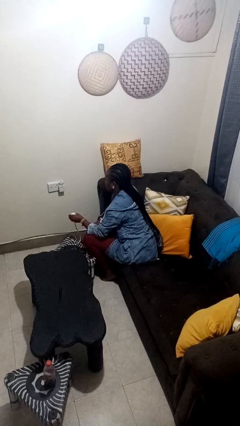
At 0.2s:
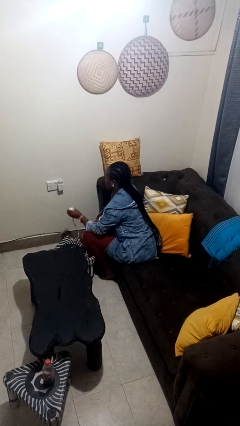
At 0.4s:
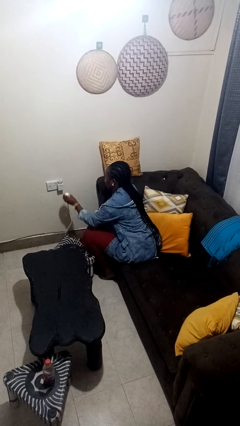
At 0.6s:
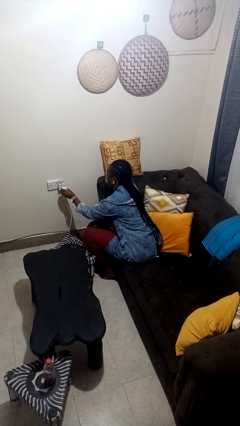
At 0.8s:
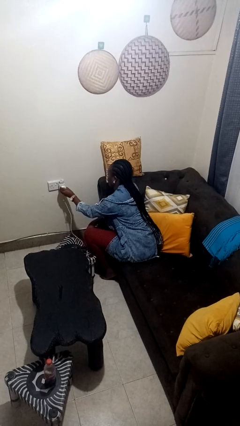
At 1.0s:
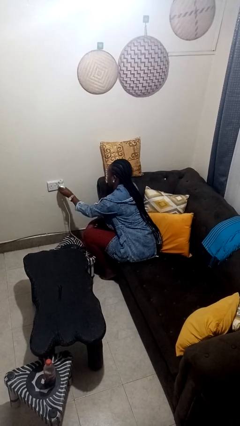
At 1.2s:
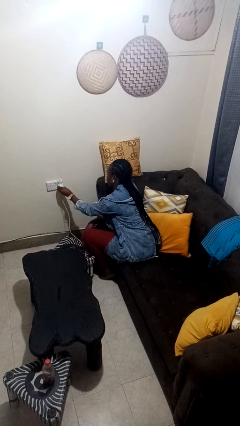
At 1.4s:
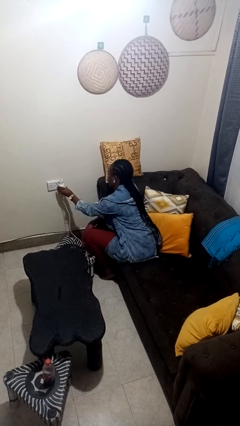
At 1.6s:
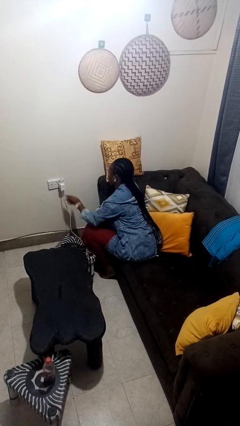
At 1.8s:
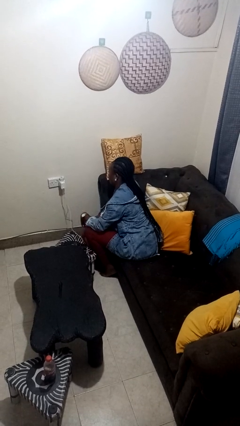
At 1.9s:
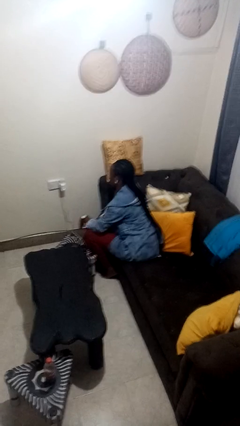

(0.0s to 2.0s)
person plugs into electrical socket

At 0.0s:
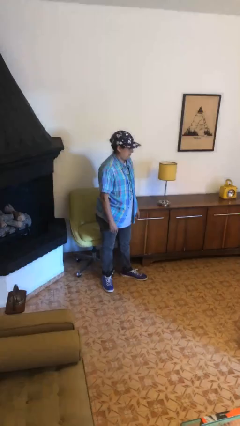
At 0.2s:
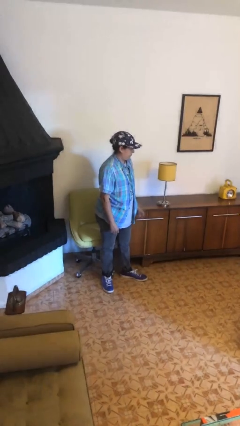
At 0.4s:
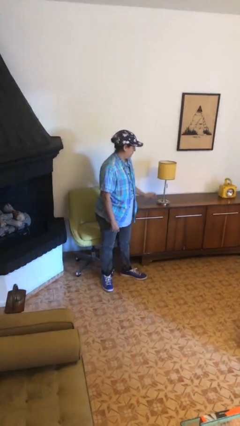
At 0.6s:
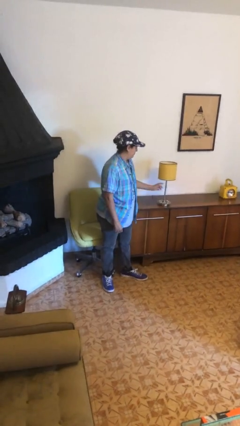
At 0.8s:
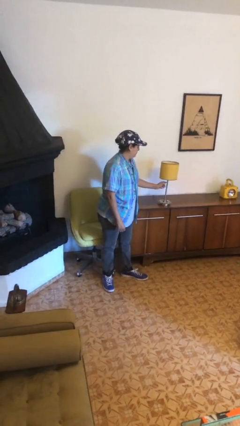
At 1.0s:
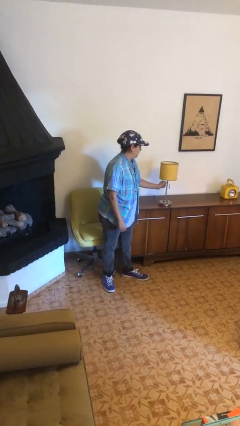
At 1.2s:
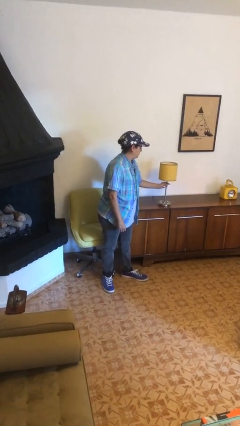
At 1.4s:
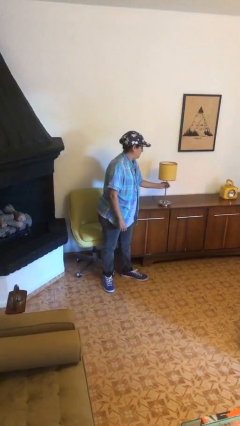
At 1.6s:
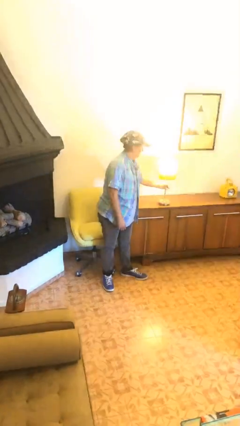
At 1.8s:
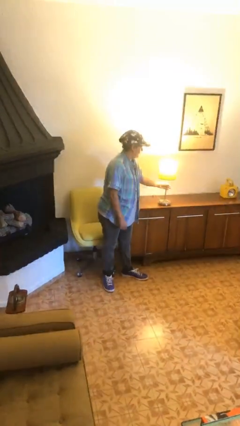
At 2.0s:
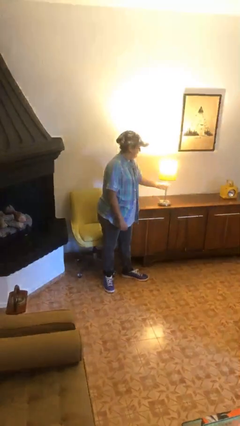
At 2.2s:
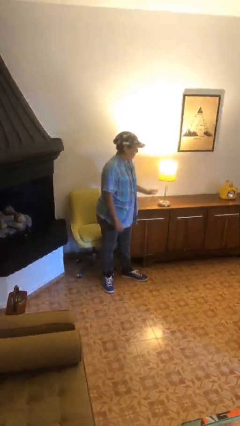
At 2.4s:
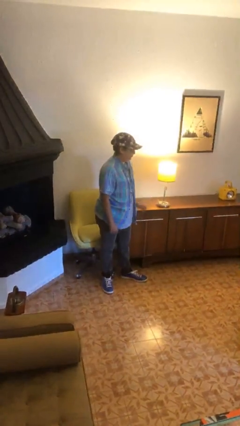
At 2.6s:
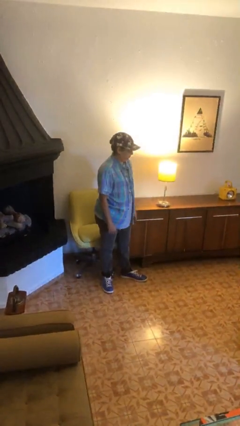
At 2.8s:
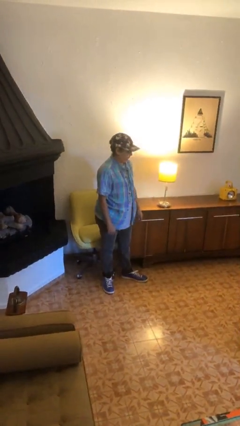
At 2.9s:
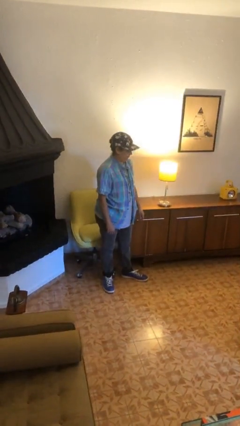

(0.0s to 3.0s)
person turns on lamp

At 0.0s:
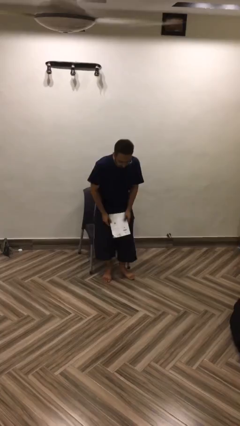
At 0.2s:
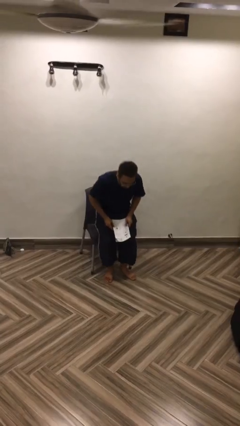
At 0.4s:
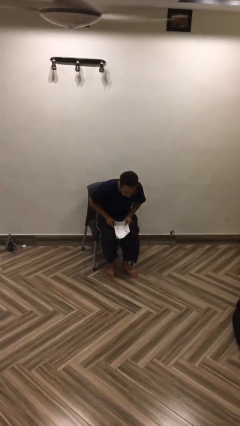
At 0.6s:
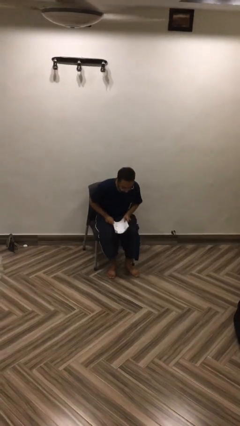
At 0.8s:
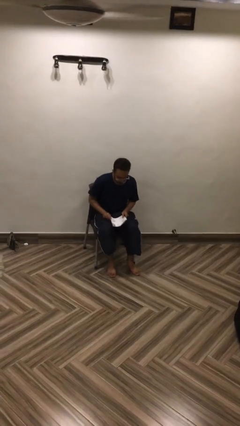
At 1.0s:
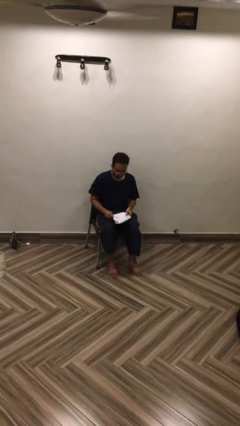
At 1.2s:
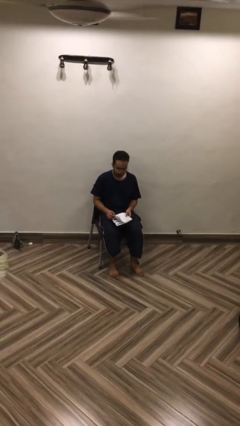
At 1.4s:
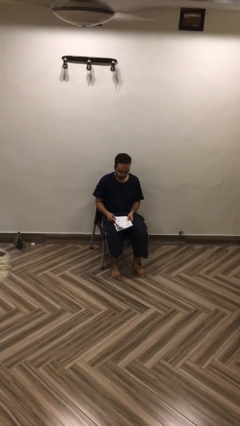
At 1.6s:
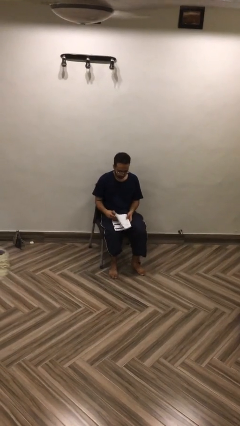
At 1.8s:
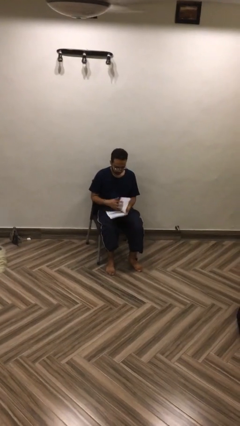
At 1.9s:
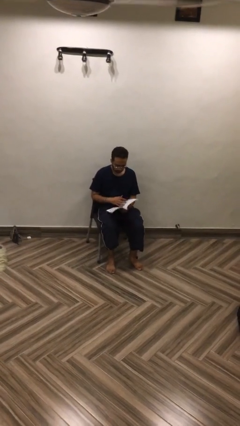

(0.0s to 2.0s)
person sits down

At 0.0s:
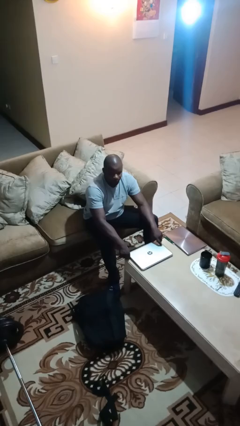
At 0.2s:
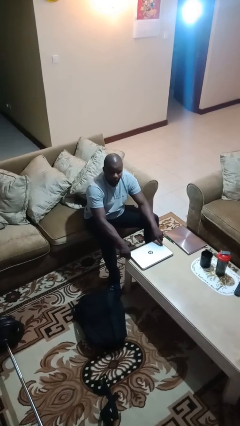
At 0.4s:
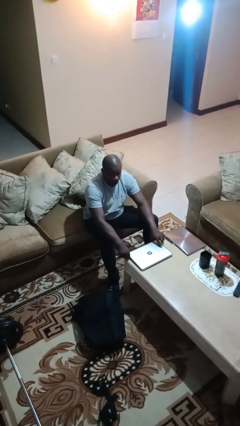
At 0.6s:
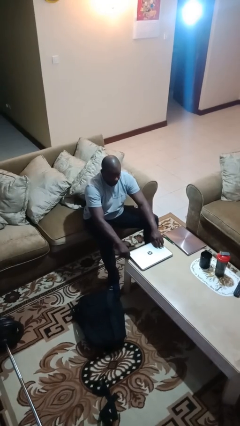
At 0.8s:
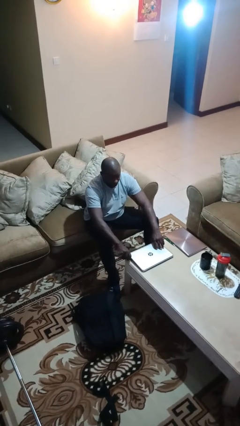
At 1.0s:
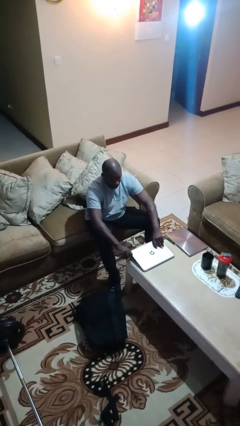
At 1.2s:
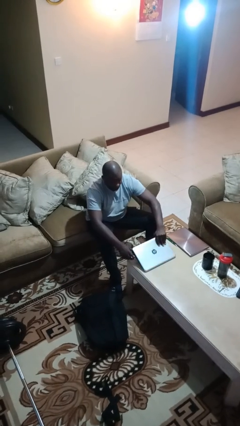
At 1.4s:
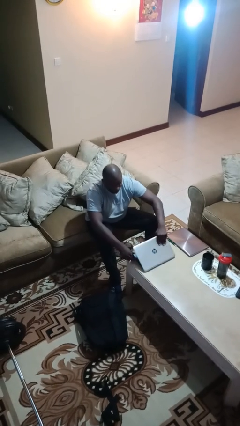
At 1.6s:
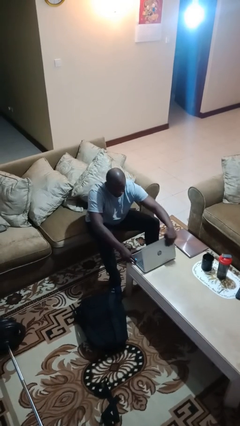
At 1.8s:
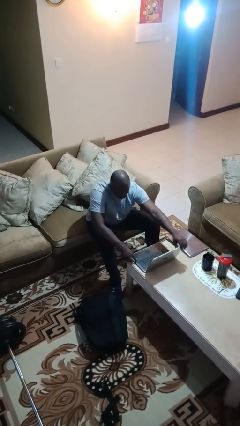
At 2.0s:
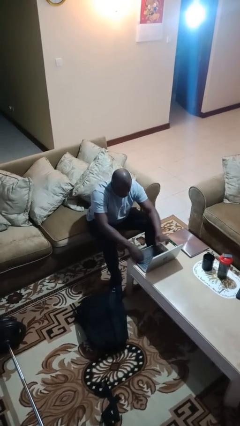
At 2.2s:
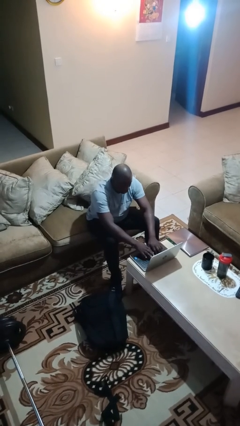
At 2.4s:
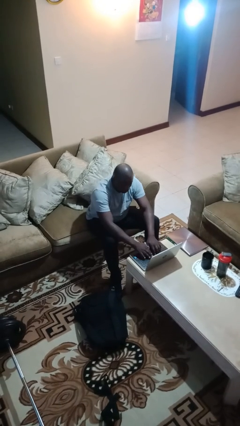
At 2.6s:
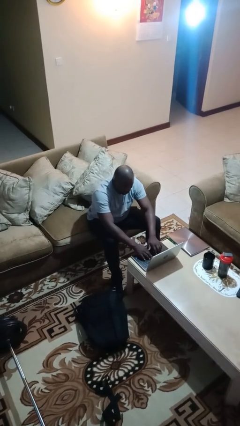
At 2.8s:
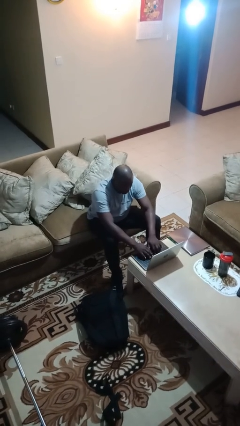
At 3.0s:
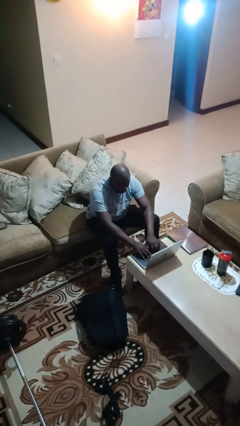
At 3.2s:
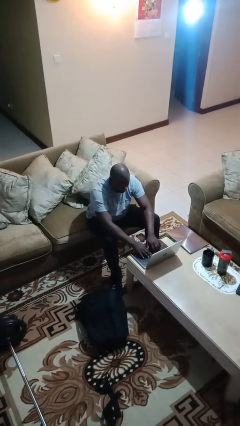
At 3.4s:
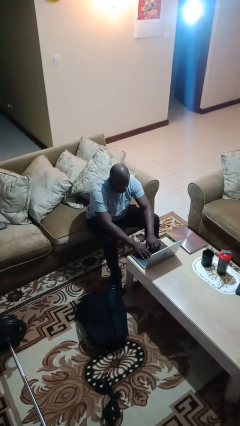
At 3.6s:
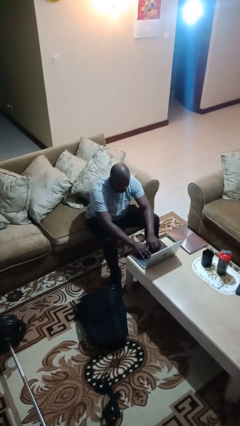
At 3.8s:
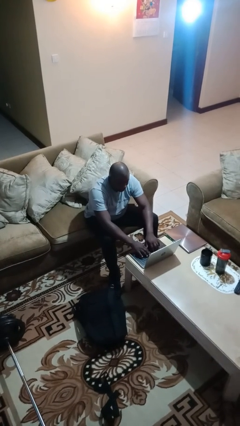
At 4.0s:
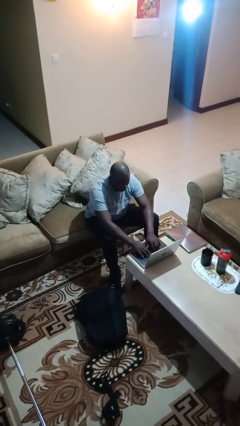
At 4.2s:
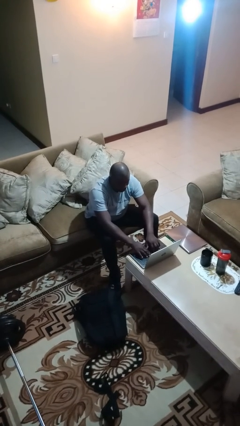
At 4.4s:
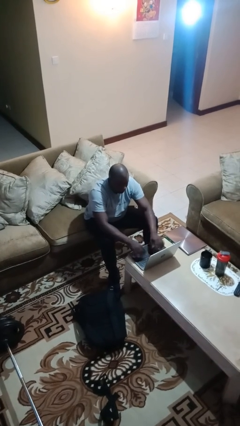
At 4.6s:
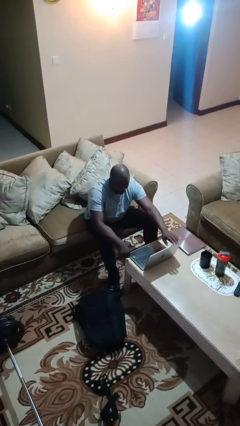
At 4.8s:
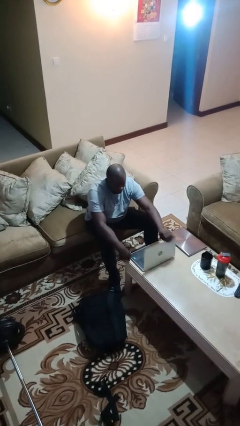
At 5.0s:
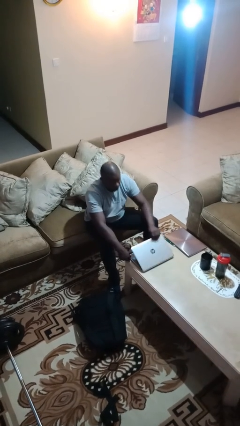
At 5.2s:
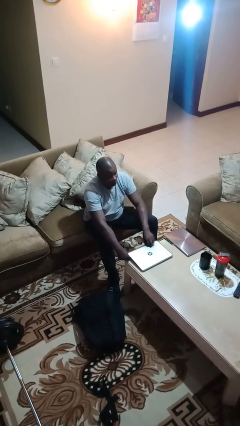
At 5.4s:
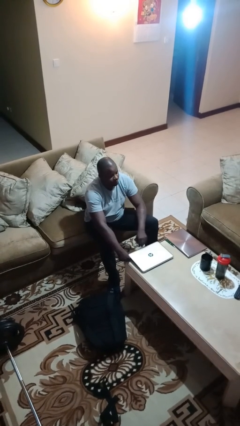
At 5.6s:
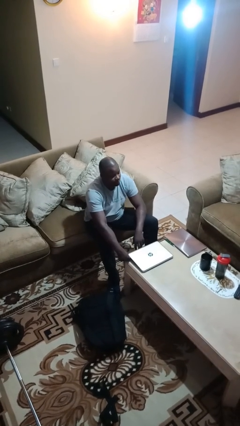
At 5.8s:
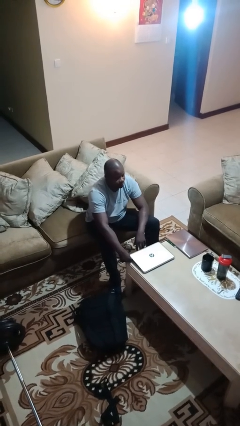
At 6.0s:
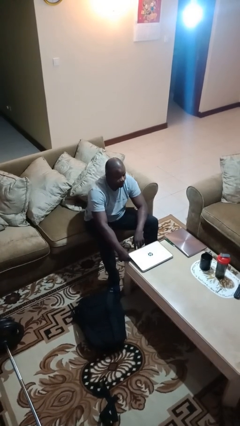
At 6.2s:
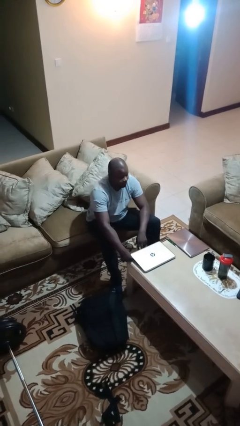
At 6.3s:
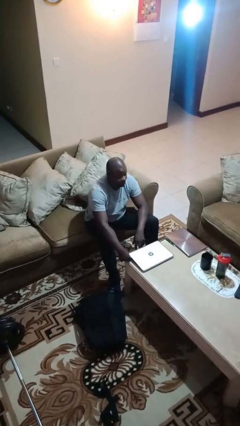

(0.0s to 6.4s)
person interacts with laptop

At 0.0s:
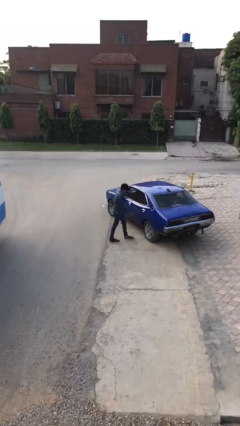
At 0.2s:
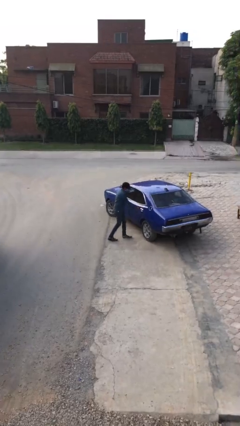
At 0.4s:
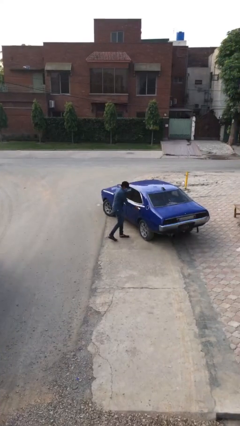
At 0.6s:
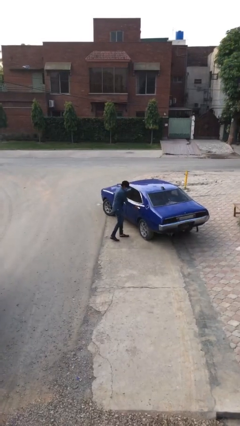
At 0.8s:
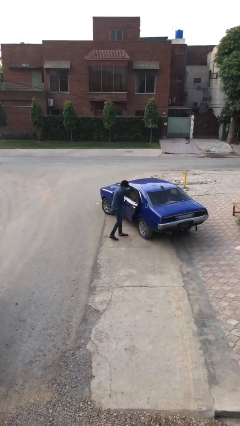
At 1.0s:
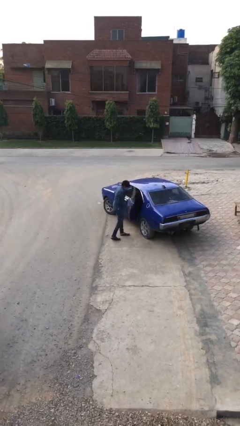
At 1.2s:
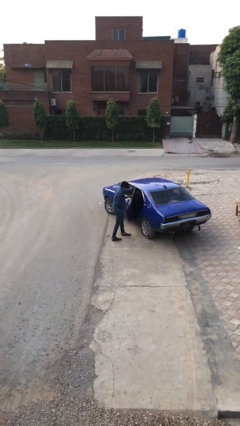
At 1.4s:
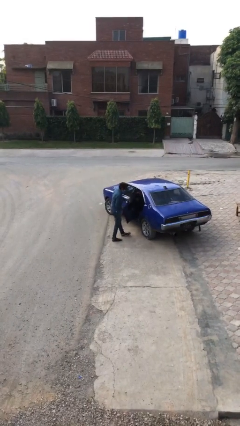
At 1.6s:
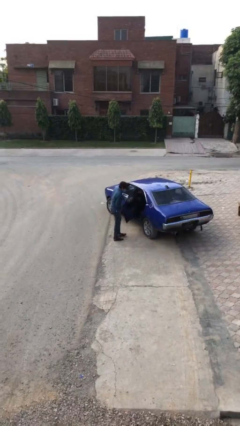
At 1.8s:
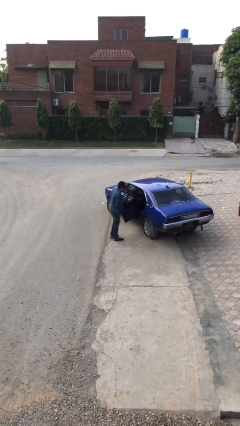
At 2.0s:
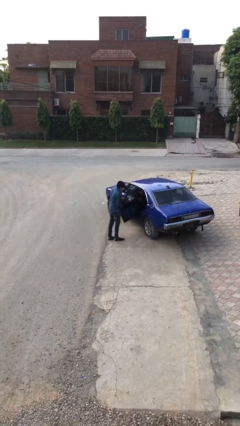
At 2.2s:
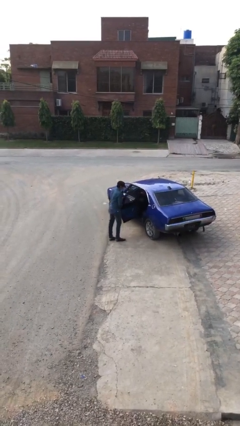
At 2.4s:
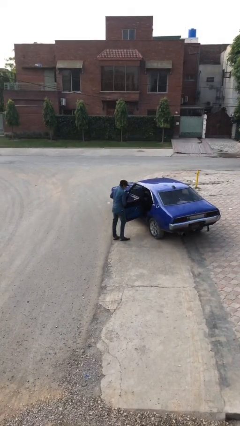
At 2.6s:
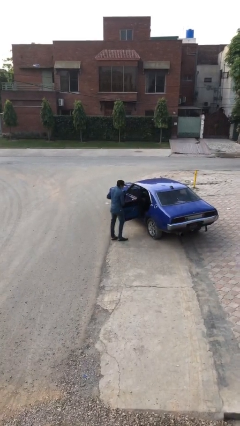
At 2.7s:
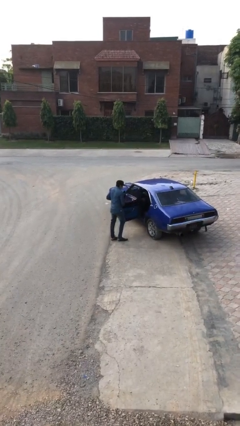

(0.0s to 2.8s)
person opens car door

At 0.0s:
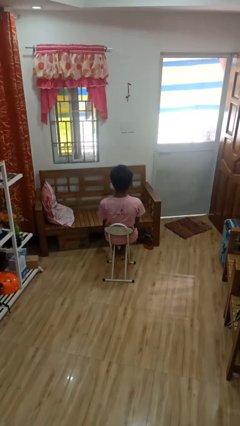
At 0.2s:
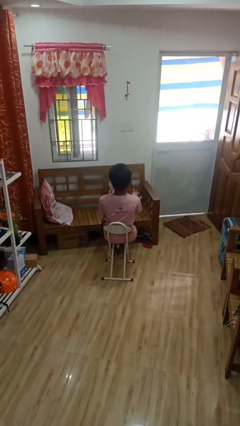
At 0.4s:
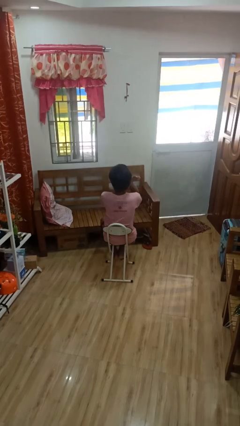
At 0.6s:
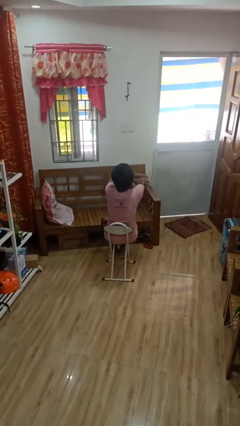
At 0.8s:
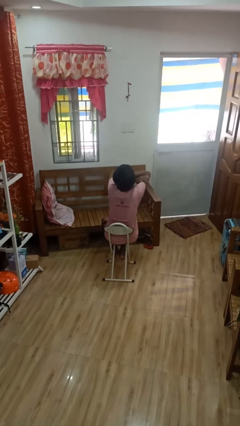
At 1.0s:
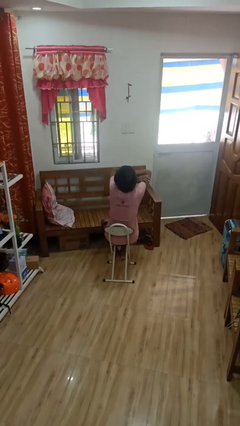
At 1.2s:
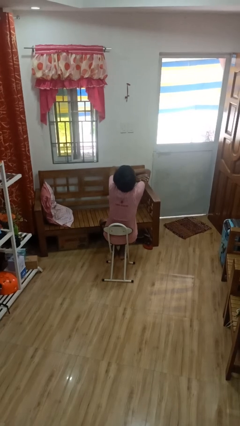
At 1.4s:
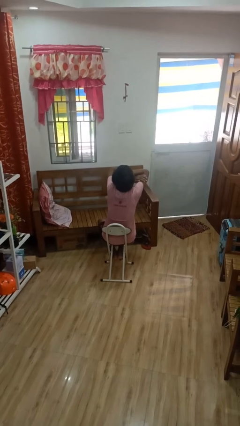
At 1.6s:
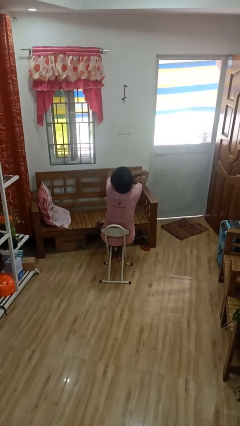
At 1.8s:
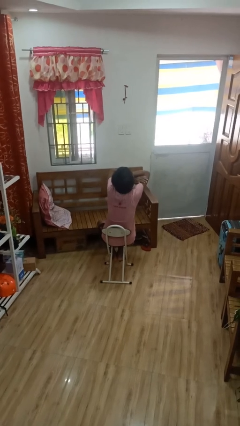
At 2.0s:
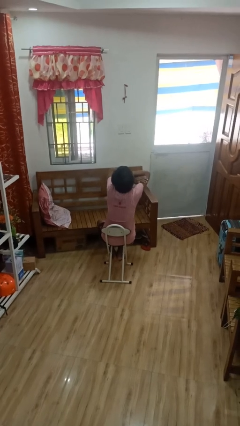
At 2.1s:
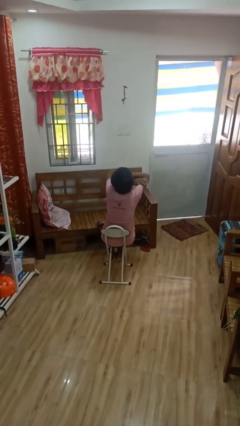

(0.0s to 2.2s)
person gestures arms x
